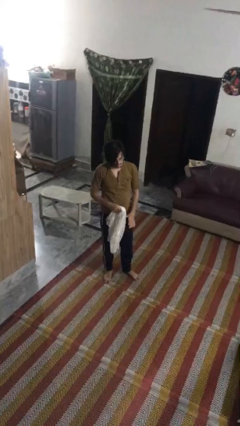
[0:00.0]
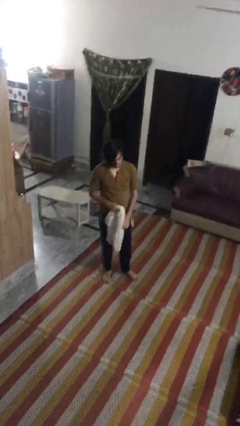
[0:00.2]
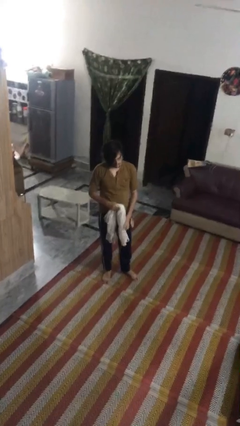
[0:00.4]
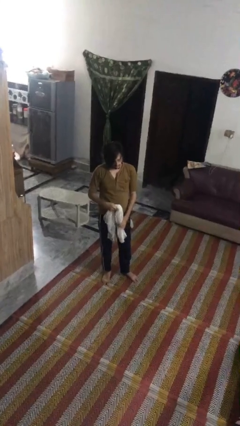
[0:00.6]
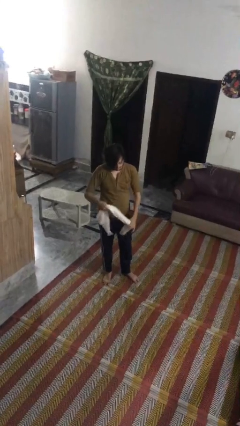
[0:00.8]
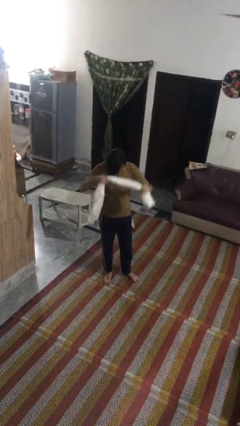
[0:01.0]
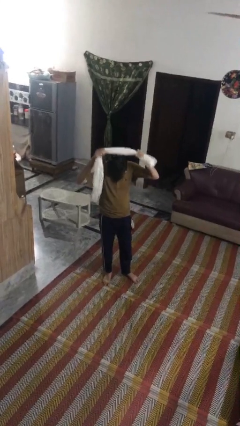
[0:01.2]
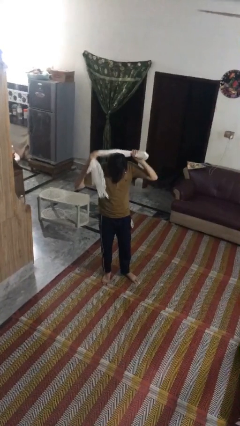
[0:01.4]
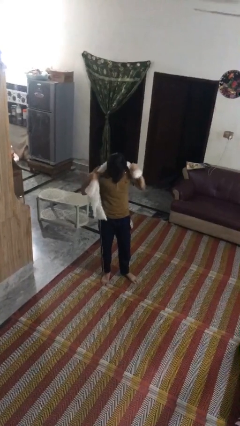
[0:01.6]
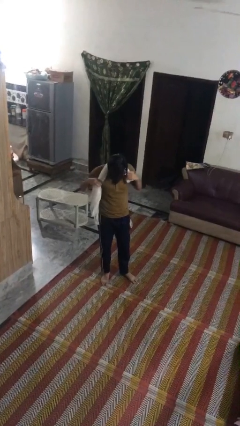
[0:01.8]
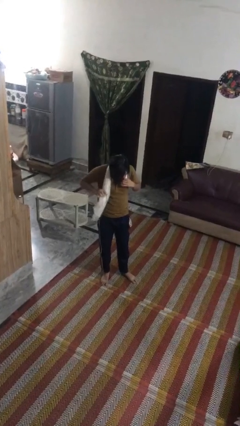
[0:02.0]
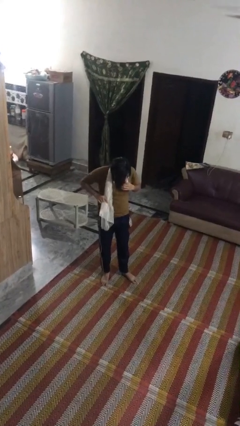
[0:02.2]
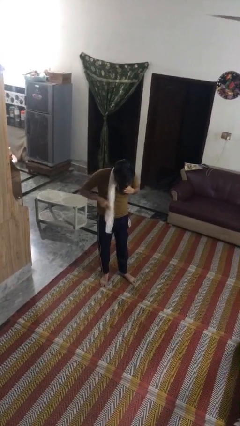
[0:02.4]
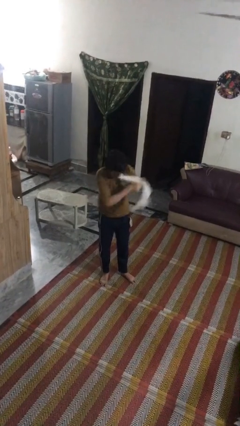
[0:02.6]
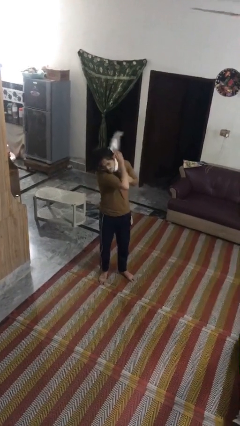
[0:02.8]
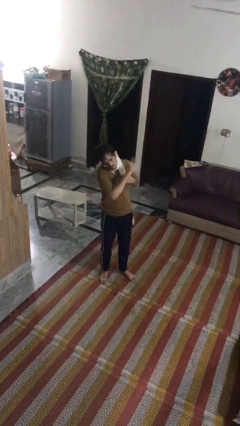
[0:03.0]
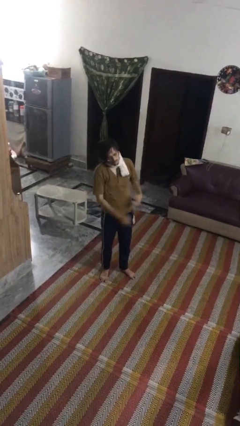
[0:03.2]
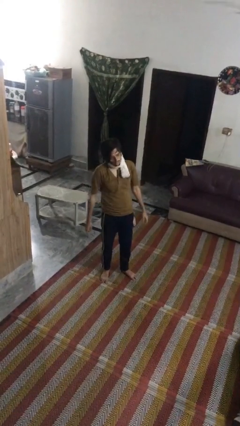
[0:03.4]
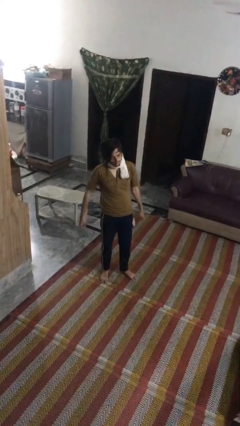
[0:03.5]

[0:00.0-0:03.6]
person puts on scarf

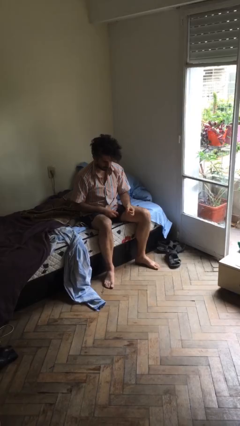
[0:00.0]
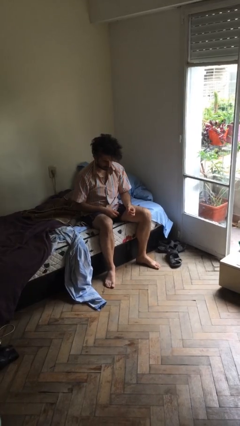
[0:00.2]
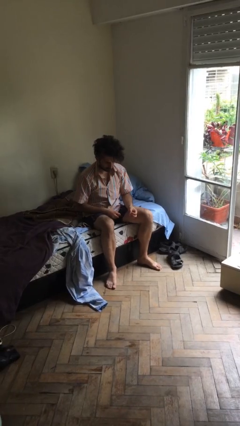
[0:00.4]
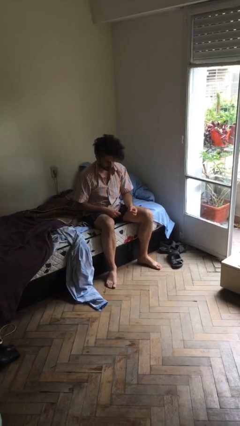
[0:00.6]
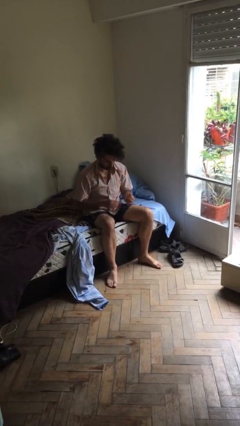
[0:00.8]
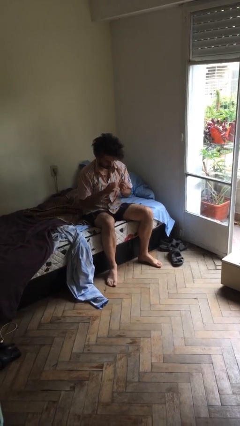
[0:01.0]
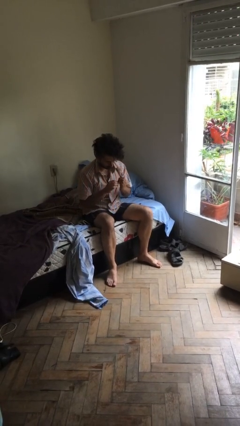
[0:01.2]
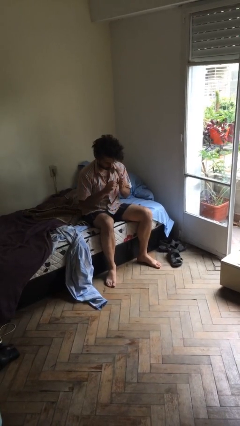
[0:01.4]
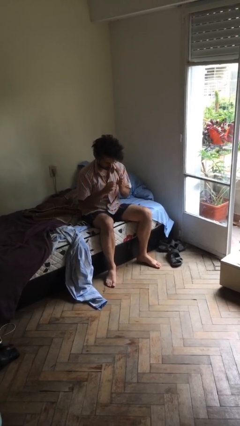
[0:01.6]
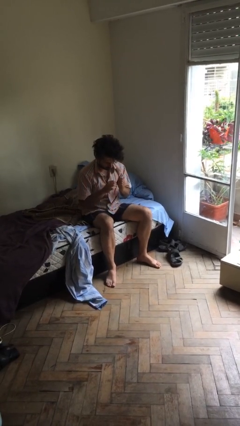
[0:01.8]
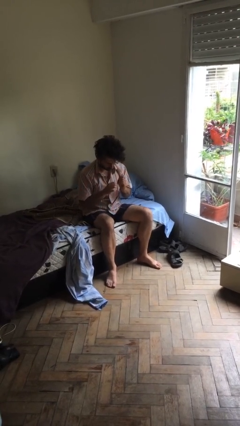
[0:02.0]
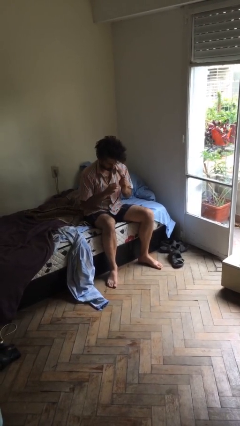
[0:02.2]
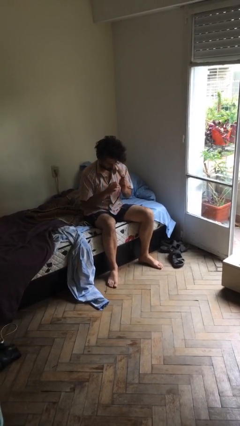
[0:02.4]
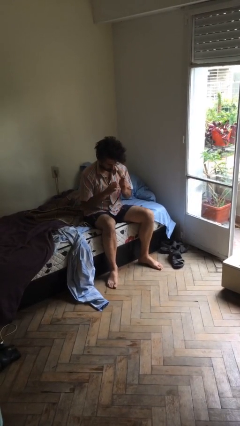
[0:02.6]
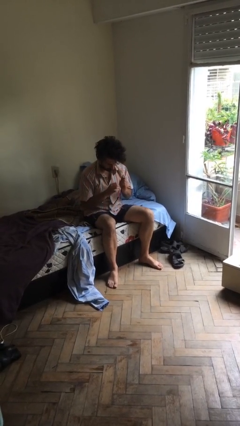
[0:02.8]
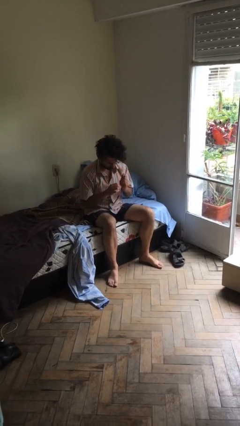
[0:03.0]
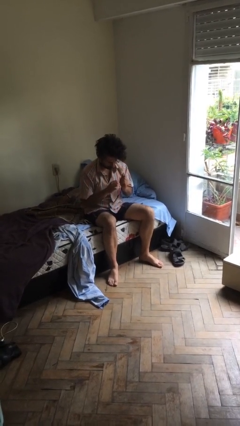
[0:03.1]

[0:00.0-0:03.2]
person files fingernails

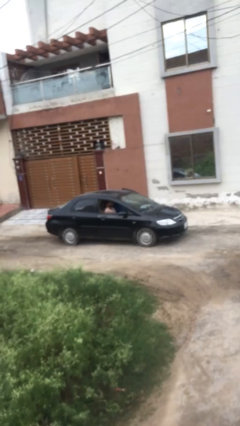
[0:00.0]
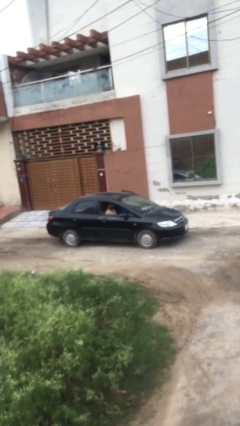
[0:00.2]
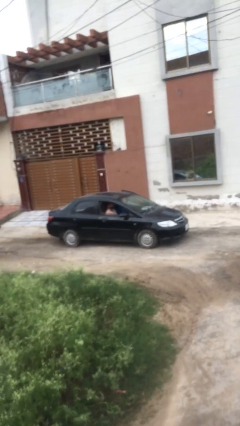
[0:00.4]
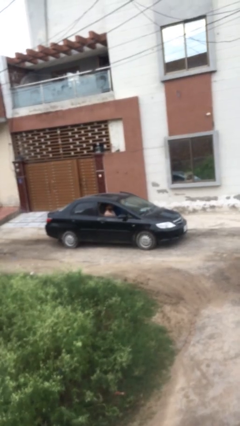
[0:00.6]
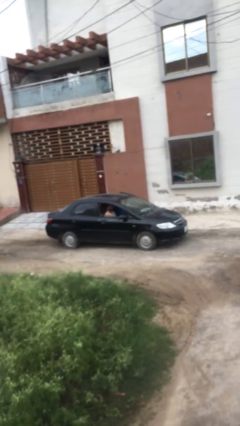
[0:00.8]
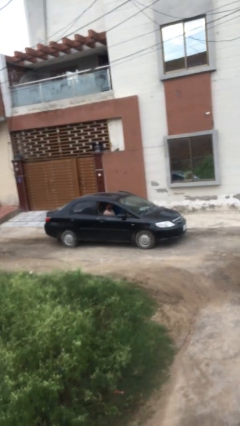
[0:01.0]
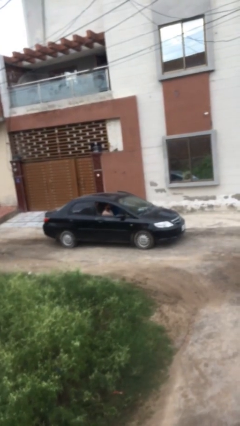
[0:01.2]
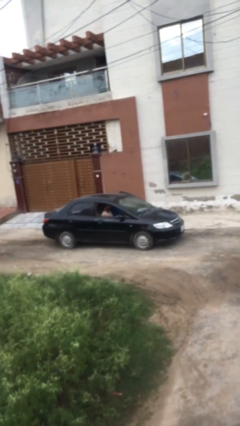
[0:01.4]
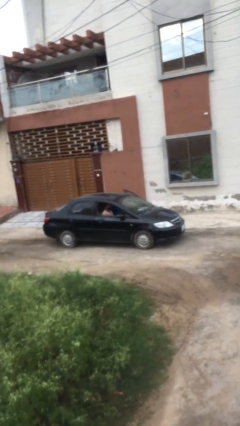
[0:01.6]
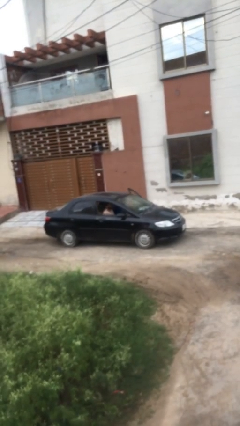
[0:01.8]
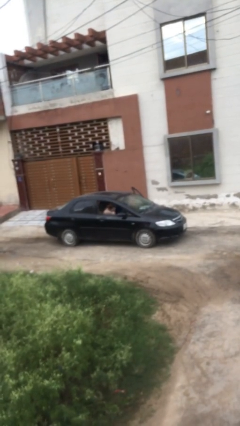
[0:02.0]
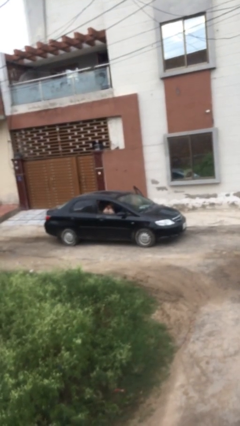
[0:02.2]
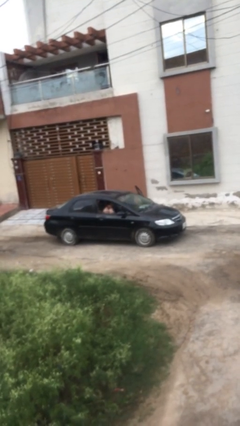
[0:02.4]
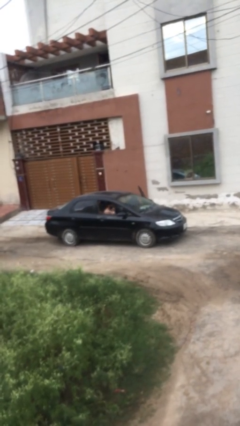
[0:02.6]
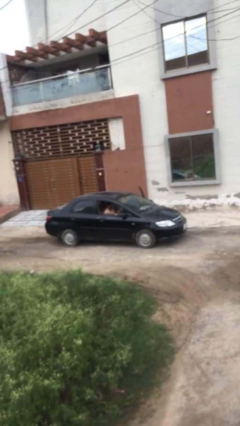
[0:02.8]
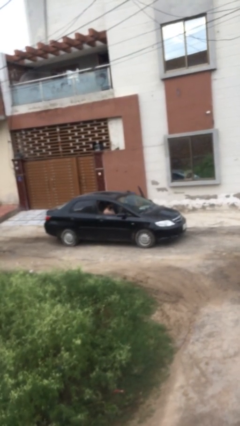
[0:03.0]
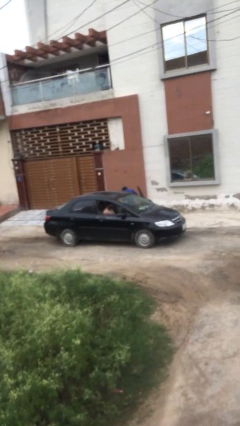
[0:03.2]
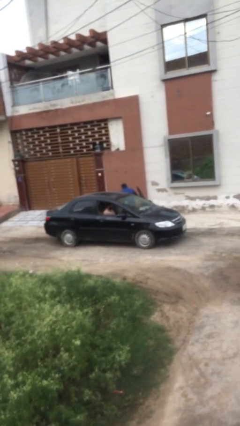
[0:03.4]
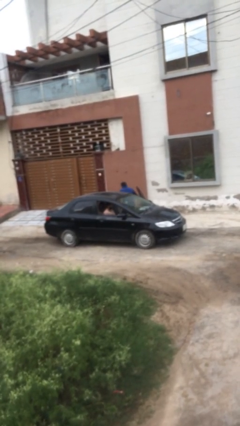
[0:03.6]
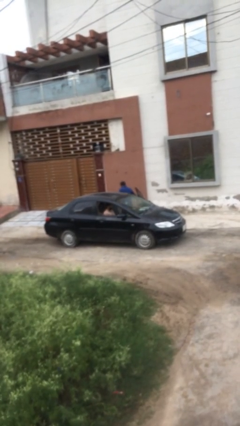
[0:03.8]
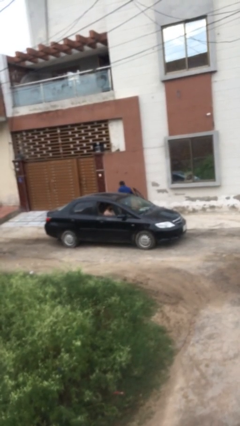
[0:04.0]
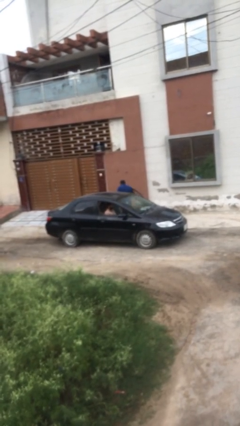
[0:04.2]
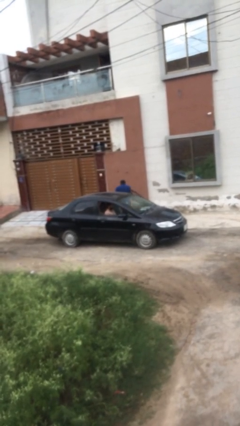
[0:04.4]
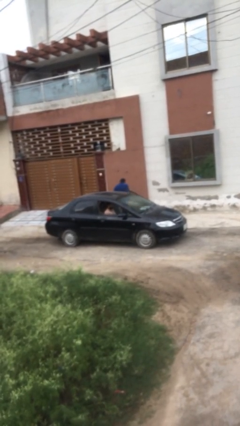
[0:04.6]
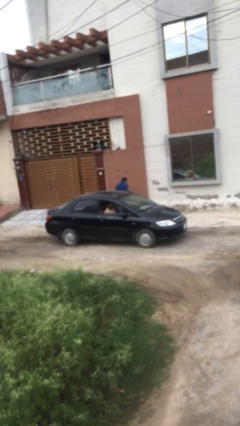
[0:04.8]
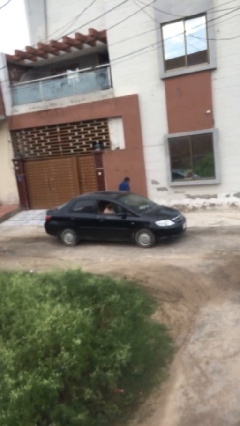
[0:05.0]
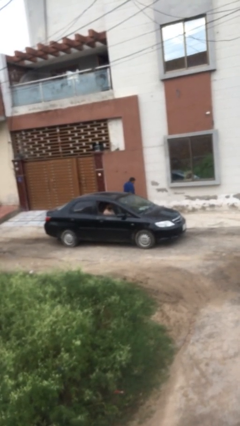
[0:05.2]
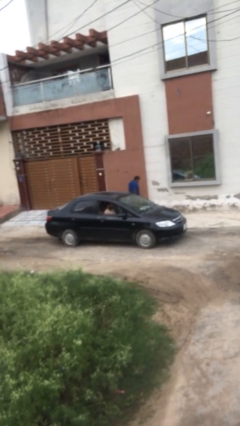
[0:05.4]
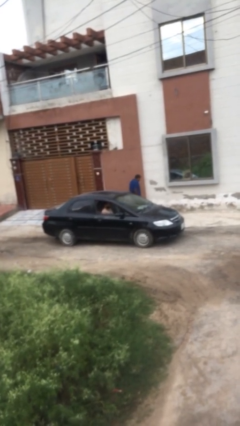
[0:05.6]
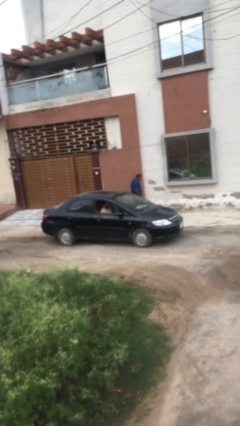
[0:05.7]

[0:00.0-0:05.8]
car drops off person

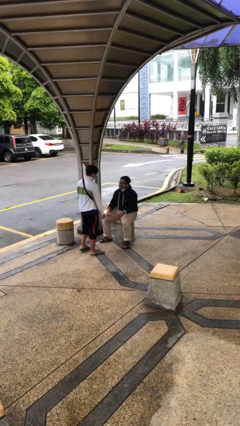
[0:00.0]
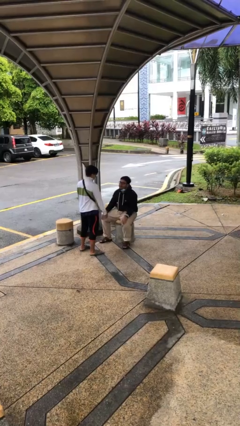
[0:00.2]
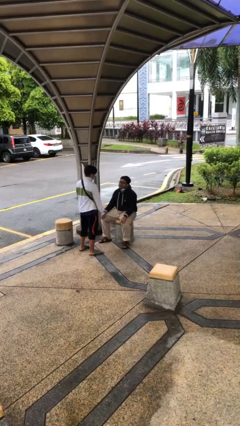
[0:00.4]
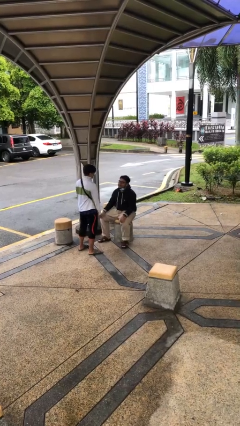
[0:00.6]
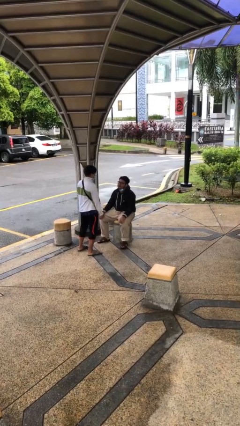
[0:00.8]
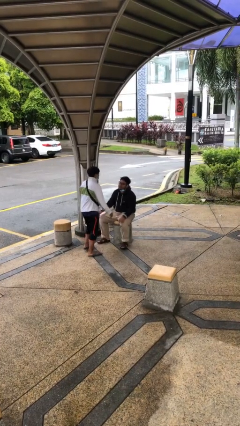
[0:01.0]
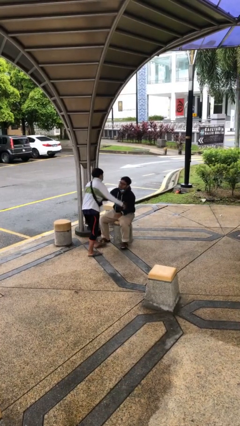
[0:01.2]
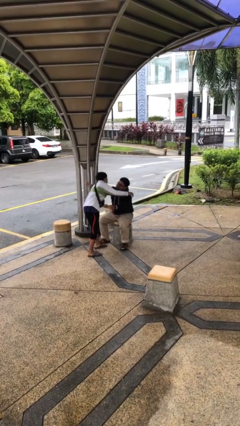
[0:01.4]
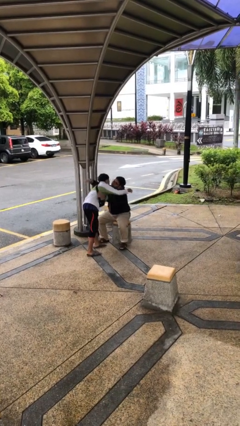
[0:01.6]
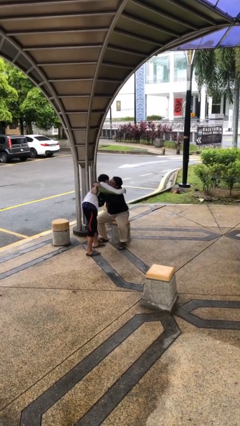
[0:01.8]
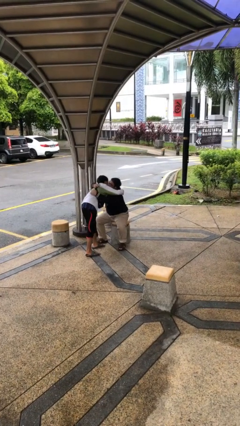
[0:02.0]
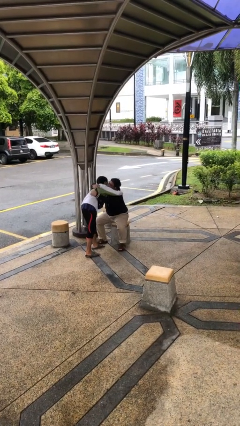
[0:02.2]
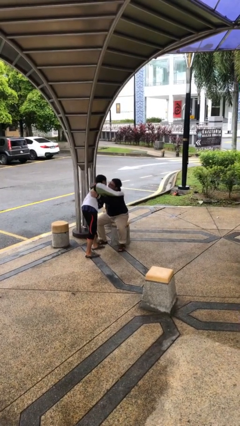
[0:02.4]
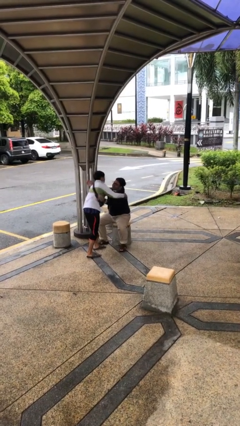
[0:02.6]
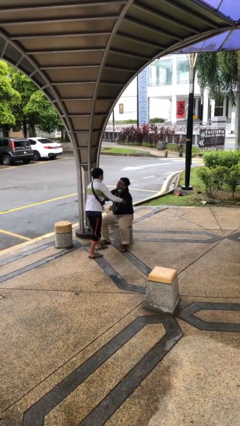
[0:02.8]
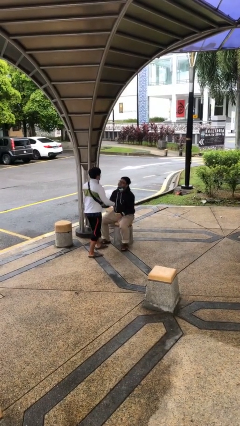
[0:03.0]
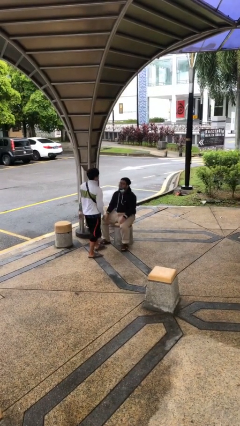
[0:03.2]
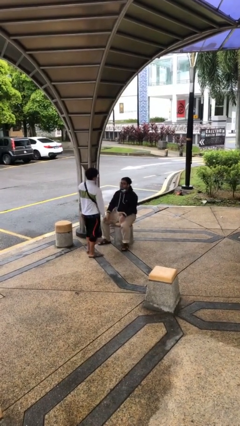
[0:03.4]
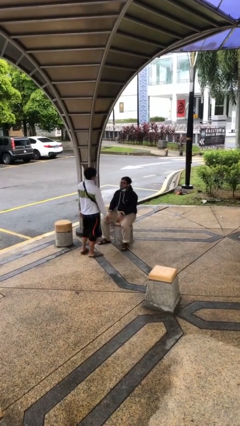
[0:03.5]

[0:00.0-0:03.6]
person embraces person

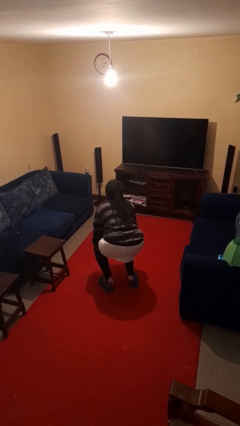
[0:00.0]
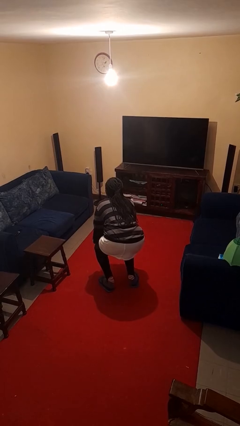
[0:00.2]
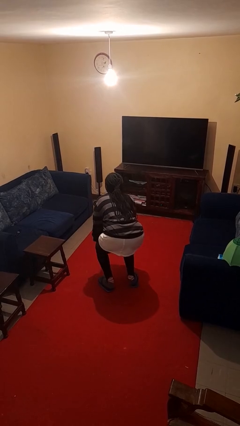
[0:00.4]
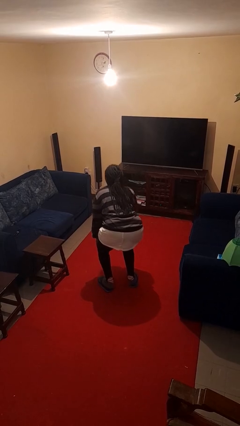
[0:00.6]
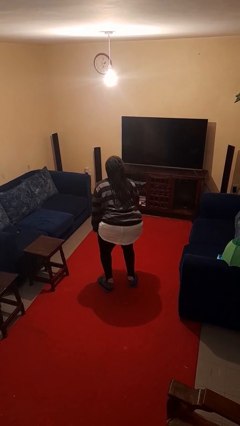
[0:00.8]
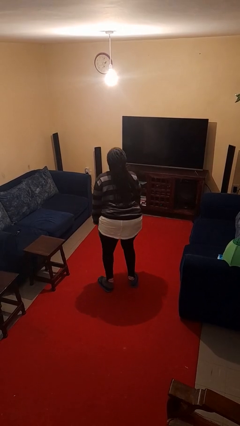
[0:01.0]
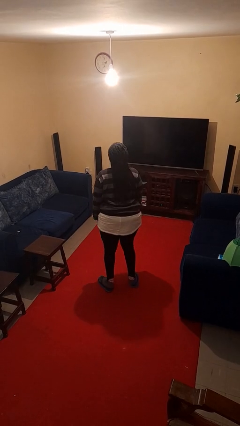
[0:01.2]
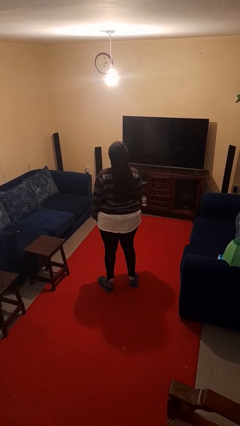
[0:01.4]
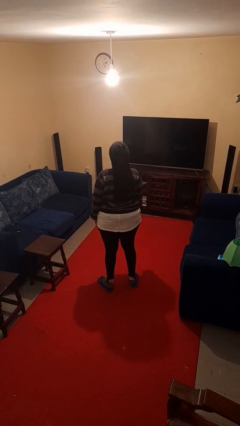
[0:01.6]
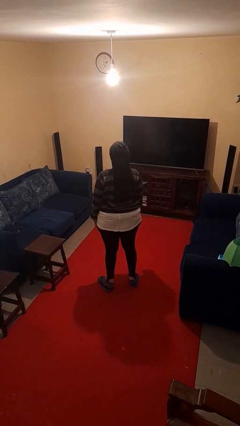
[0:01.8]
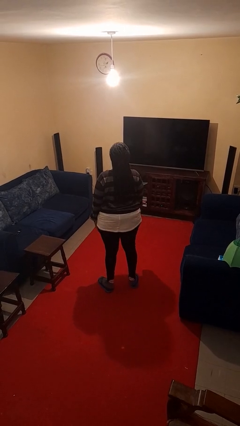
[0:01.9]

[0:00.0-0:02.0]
person stands up
